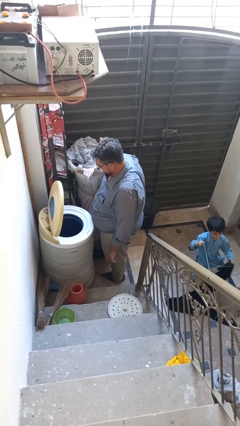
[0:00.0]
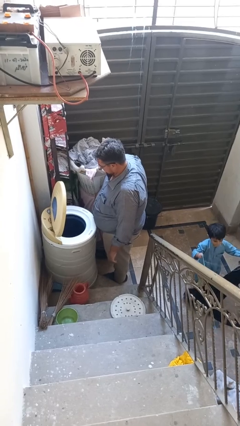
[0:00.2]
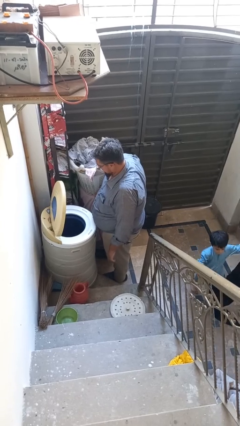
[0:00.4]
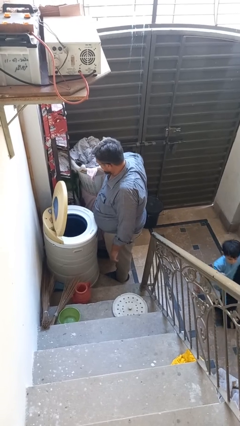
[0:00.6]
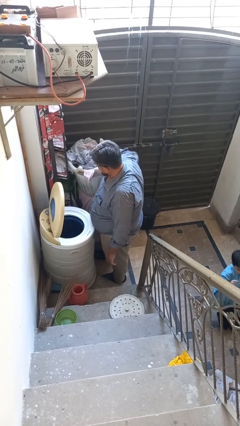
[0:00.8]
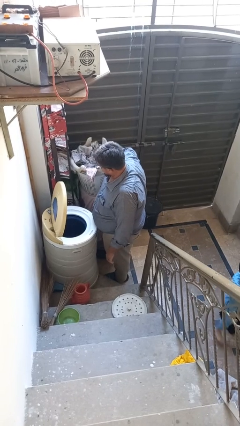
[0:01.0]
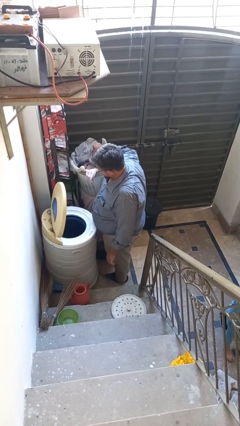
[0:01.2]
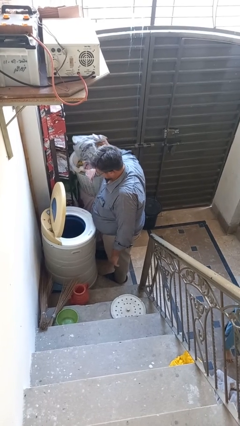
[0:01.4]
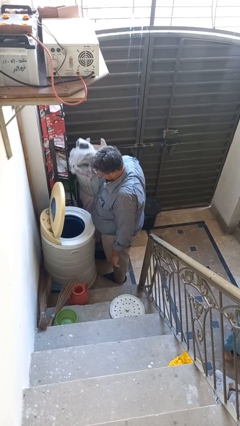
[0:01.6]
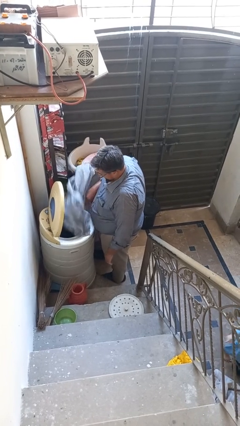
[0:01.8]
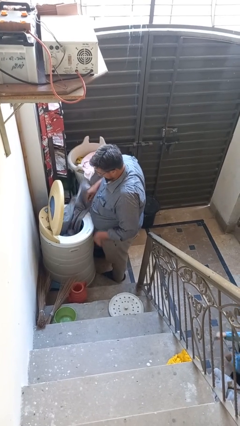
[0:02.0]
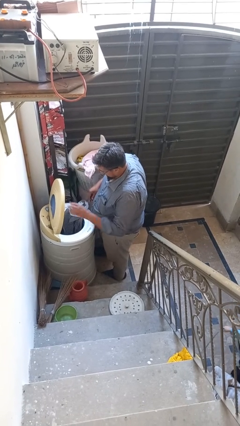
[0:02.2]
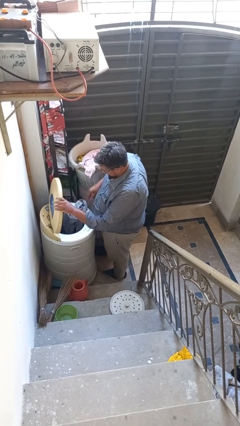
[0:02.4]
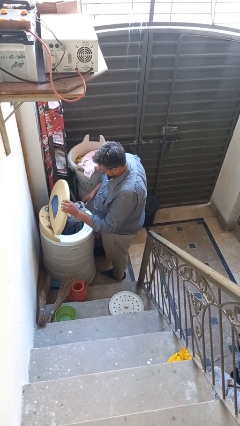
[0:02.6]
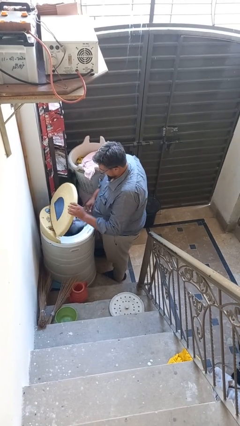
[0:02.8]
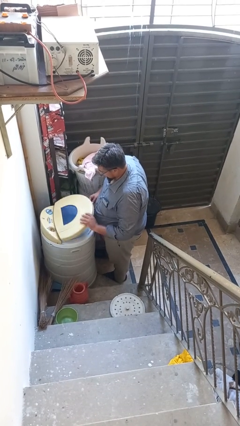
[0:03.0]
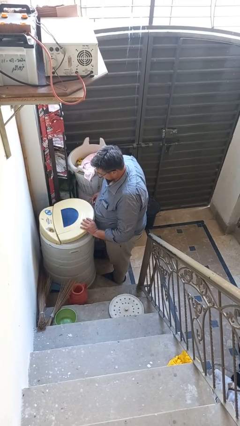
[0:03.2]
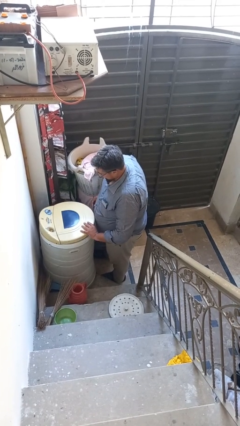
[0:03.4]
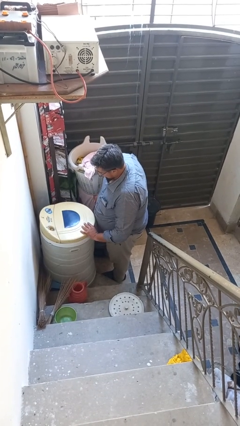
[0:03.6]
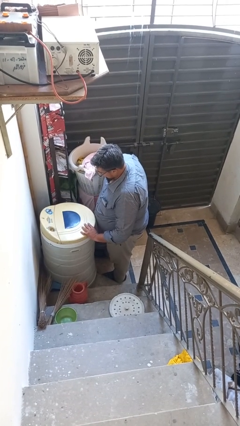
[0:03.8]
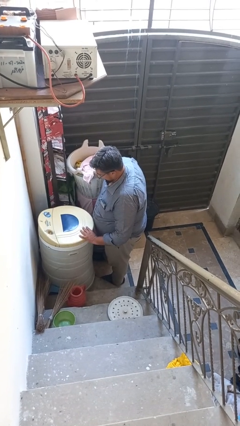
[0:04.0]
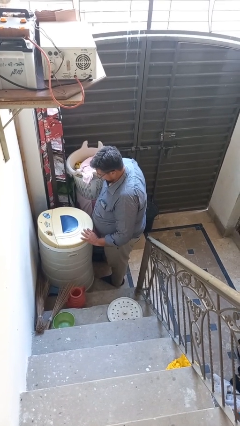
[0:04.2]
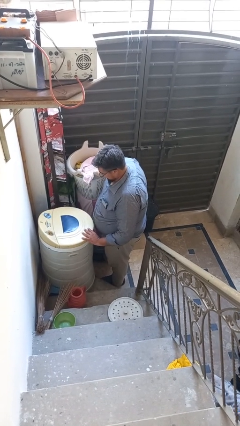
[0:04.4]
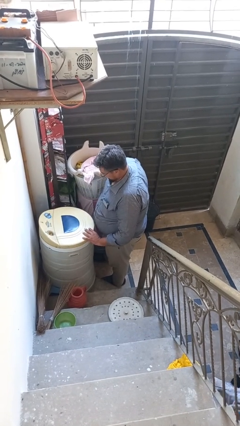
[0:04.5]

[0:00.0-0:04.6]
person loads clotheswasher

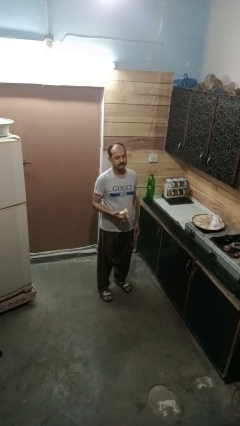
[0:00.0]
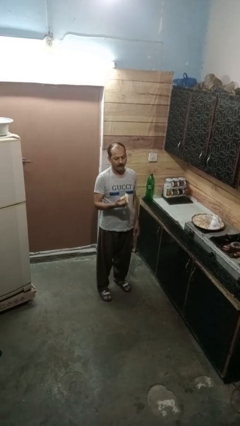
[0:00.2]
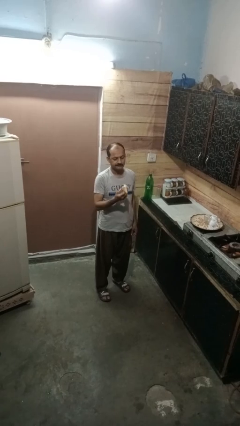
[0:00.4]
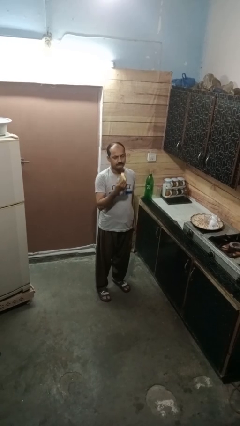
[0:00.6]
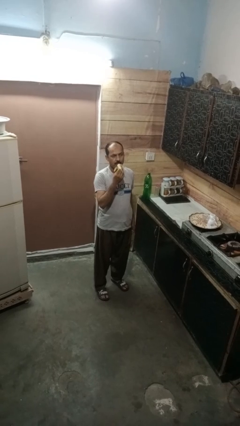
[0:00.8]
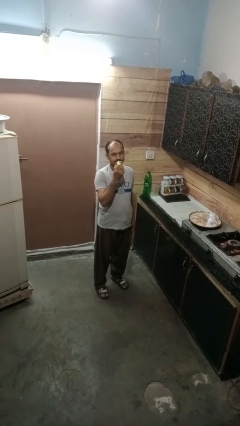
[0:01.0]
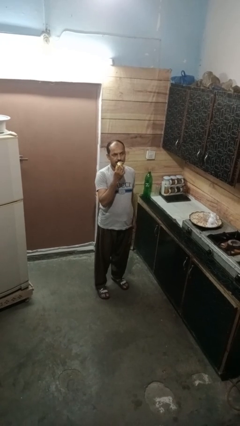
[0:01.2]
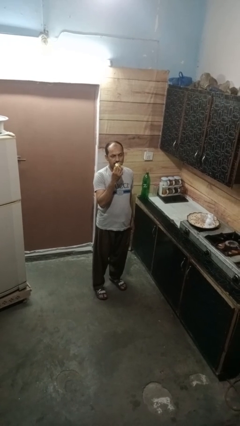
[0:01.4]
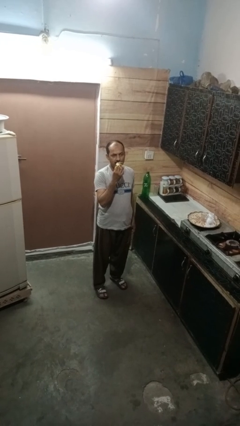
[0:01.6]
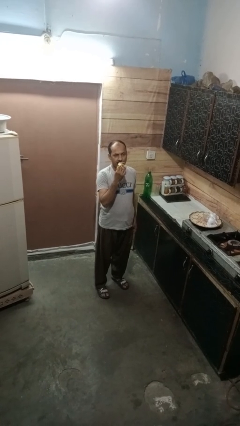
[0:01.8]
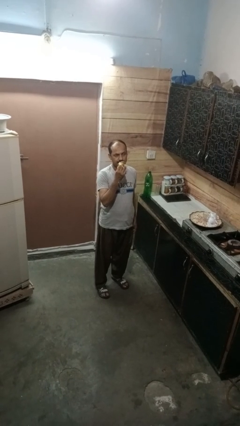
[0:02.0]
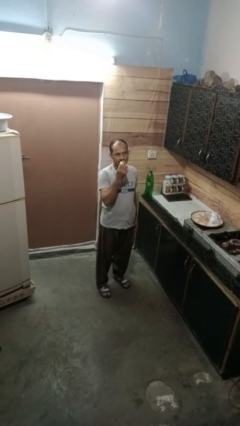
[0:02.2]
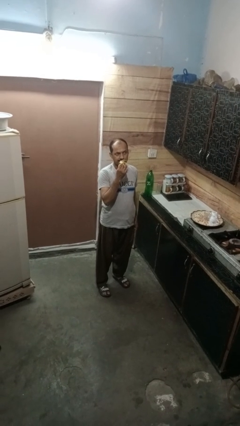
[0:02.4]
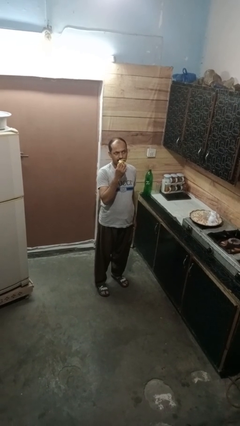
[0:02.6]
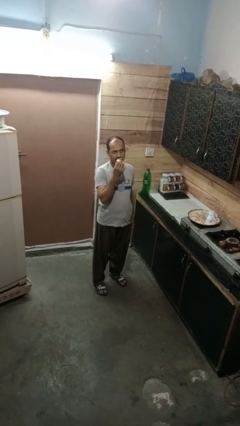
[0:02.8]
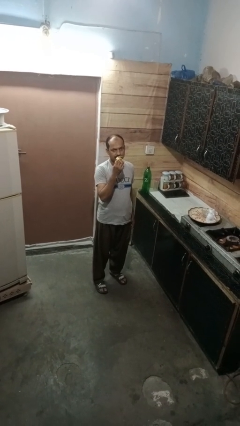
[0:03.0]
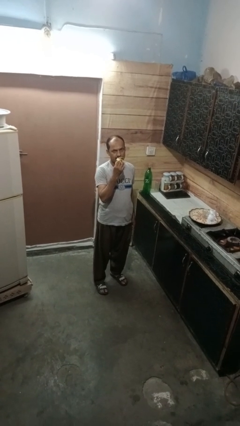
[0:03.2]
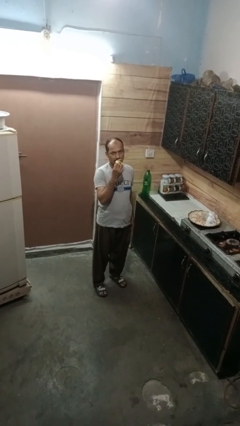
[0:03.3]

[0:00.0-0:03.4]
person eats banana

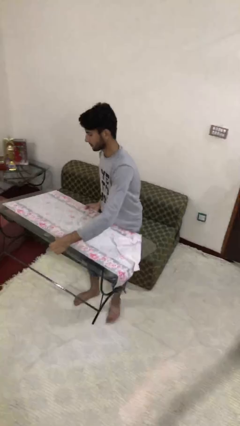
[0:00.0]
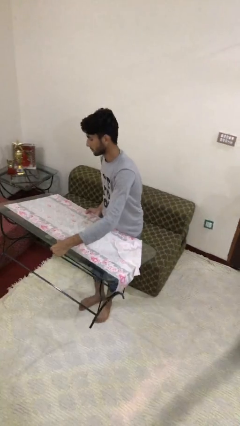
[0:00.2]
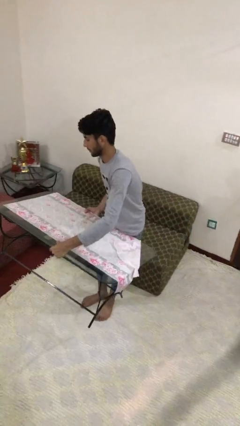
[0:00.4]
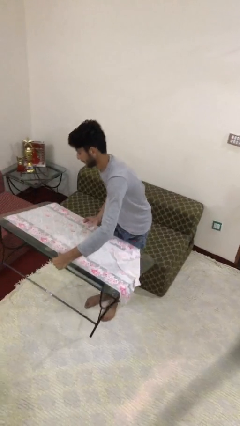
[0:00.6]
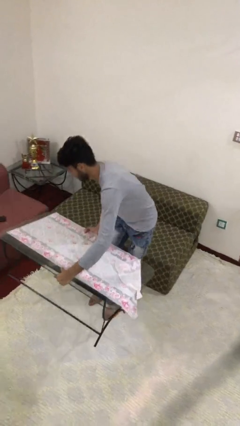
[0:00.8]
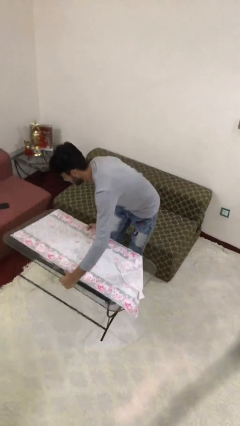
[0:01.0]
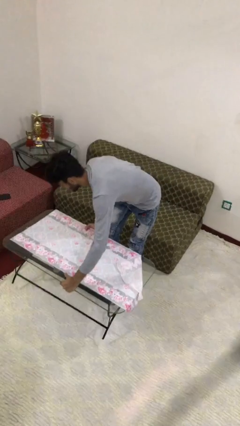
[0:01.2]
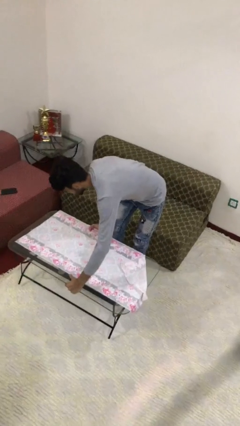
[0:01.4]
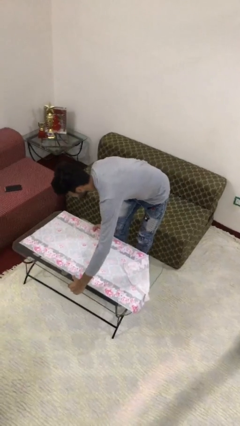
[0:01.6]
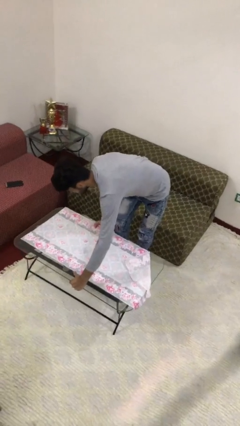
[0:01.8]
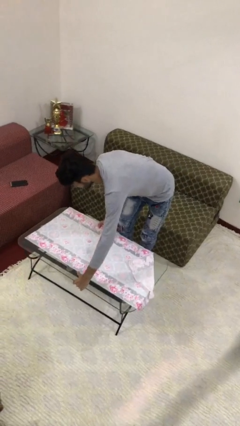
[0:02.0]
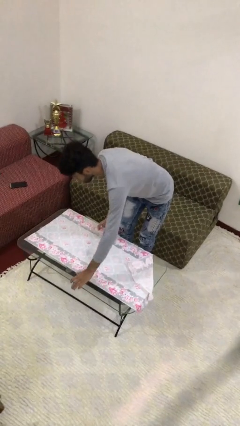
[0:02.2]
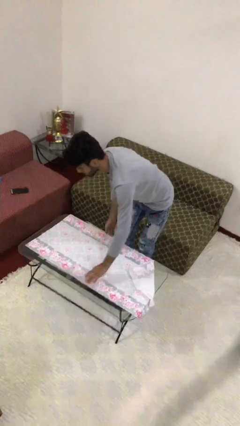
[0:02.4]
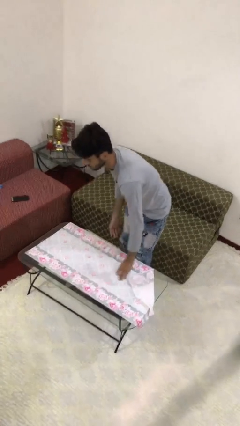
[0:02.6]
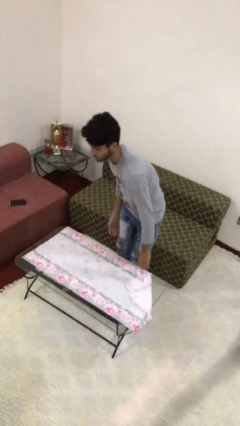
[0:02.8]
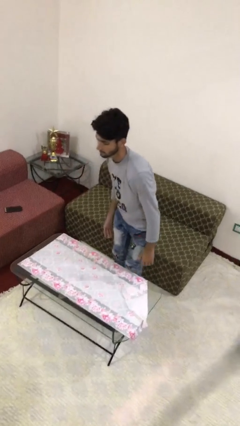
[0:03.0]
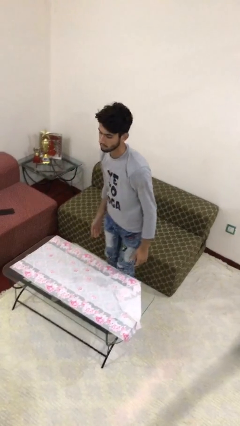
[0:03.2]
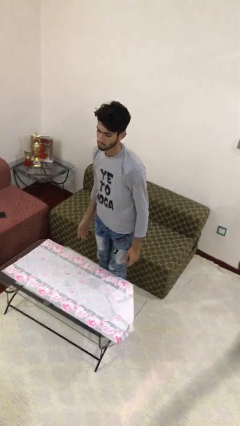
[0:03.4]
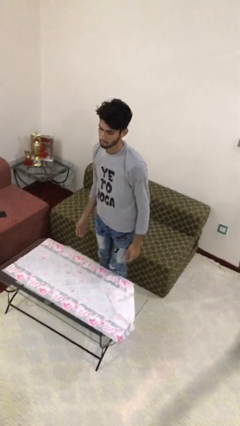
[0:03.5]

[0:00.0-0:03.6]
person puts down object on floor

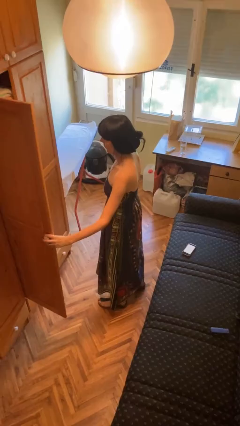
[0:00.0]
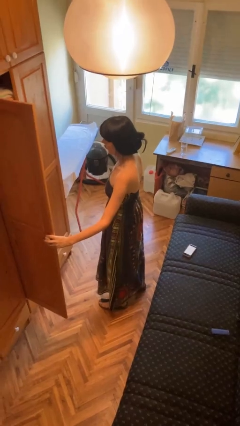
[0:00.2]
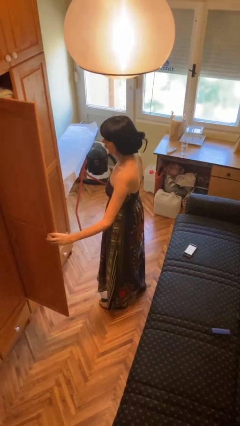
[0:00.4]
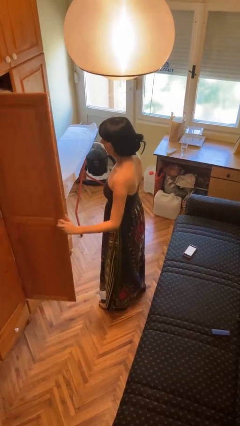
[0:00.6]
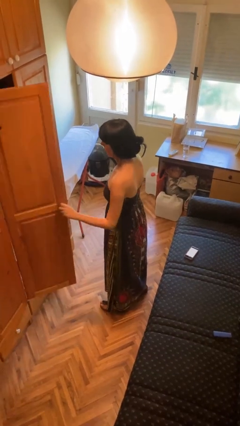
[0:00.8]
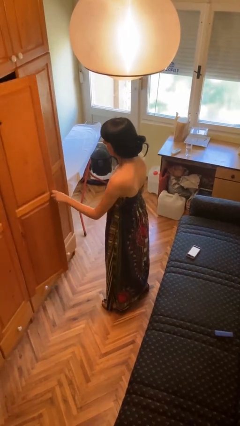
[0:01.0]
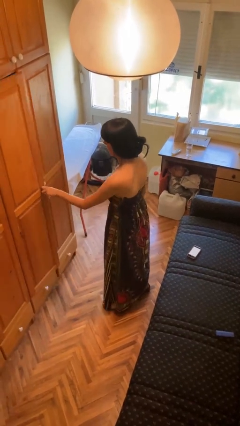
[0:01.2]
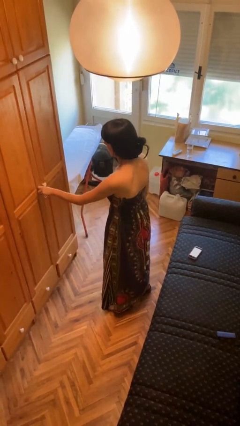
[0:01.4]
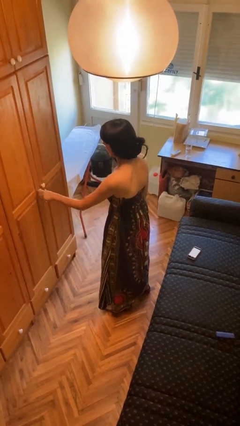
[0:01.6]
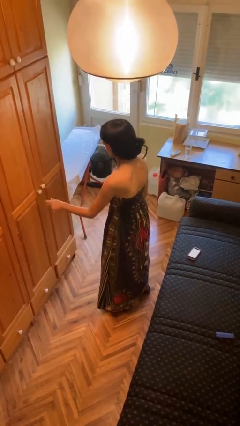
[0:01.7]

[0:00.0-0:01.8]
person closes closet door

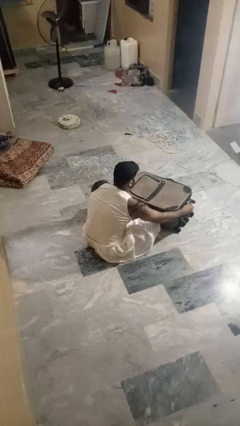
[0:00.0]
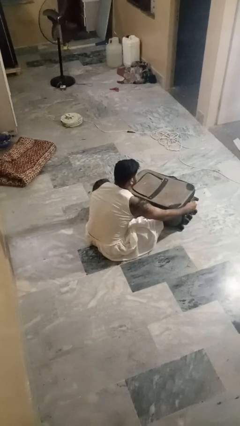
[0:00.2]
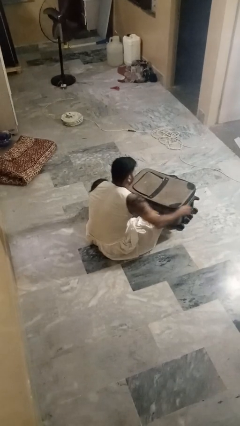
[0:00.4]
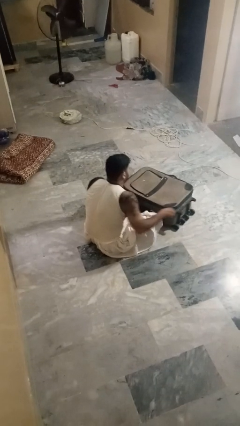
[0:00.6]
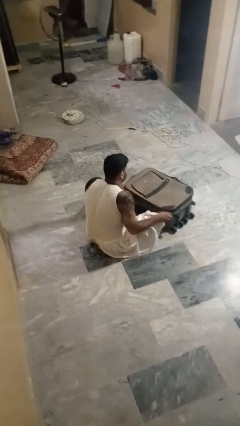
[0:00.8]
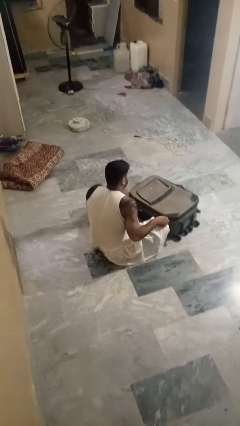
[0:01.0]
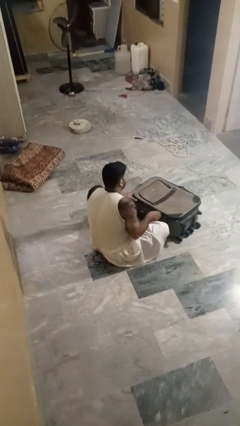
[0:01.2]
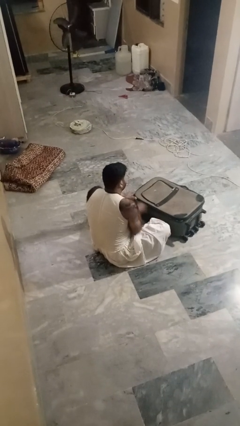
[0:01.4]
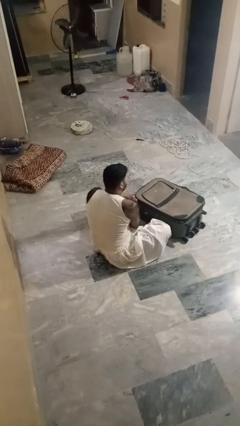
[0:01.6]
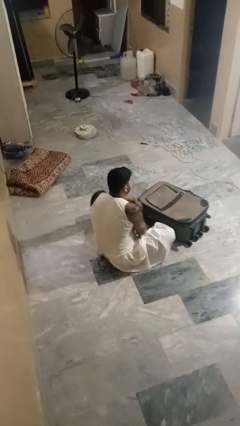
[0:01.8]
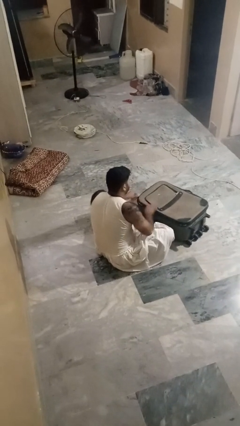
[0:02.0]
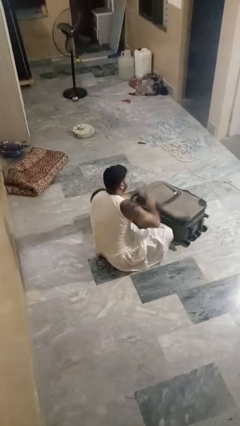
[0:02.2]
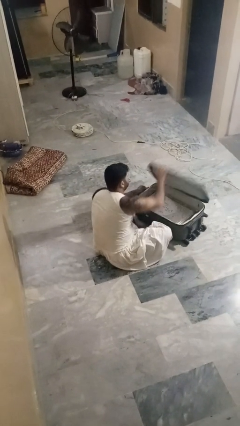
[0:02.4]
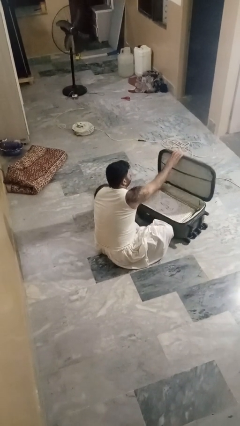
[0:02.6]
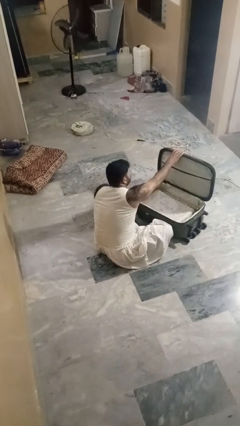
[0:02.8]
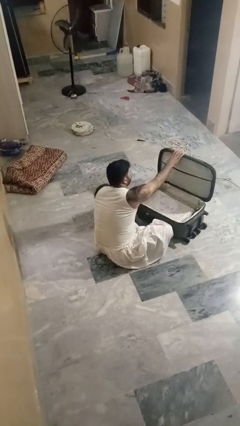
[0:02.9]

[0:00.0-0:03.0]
person opens suitcase

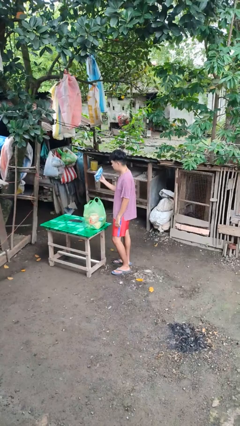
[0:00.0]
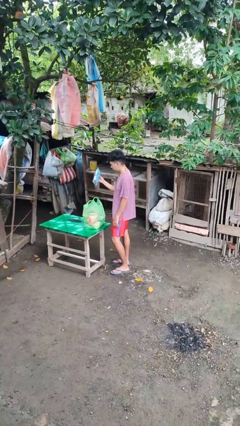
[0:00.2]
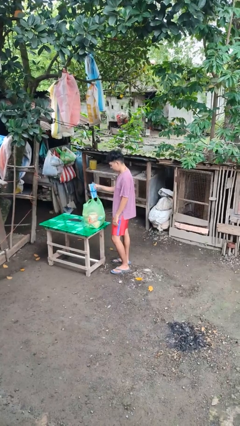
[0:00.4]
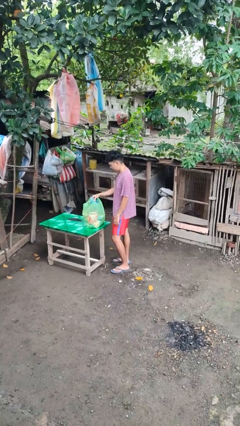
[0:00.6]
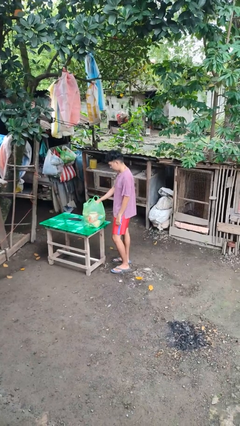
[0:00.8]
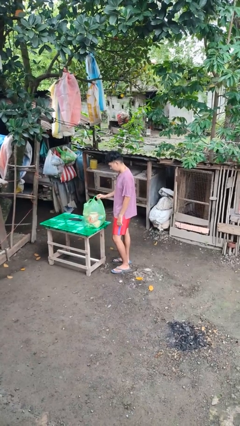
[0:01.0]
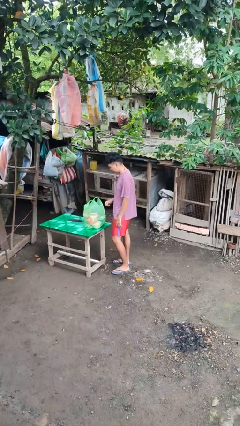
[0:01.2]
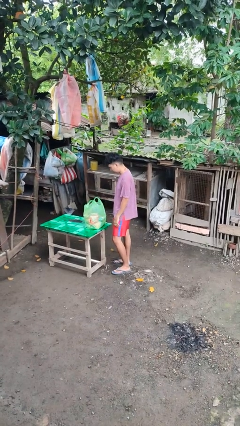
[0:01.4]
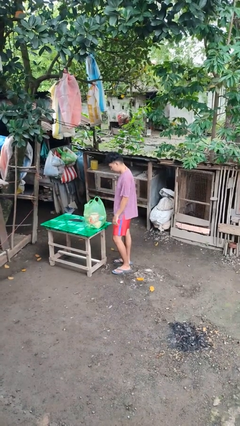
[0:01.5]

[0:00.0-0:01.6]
person puts object into bag
